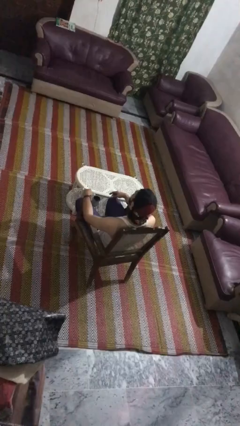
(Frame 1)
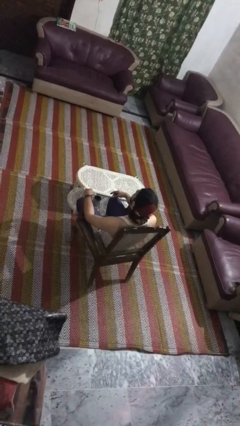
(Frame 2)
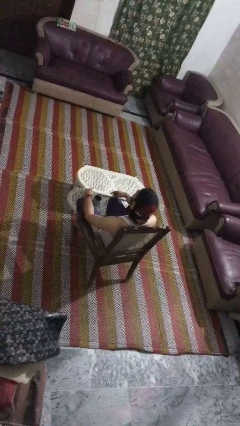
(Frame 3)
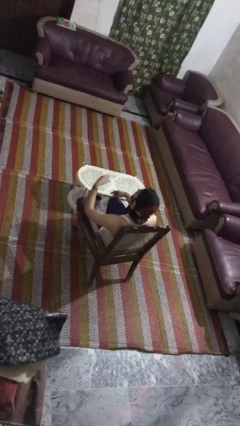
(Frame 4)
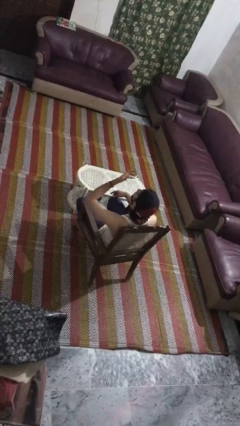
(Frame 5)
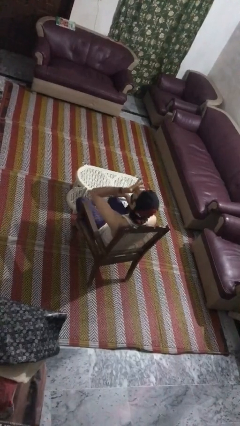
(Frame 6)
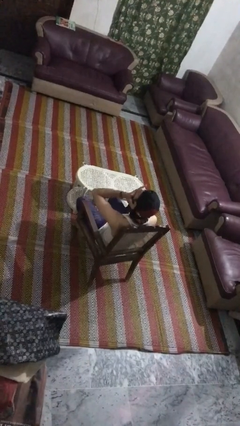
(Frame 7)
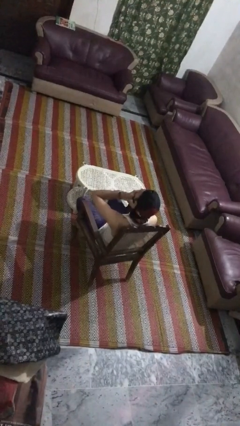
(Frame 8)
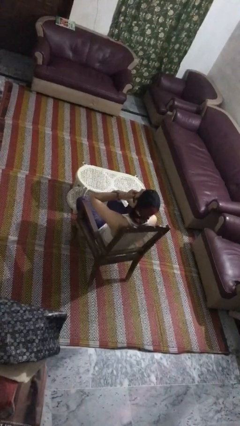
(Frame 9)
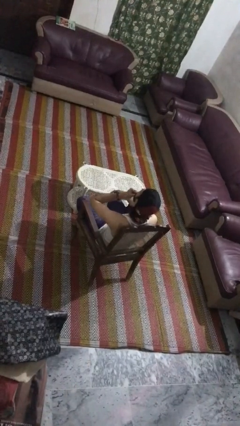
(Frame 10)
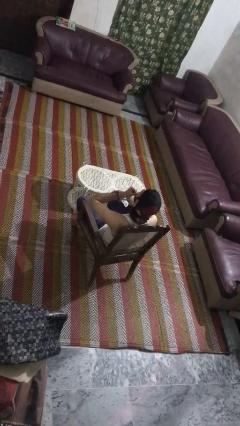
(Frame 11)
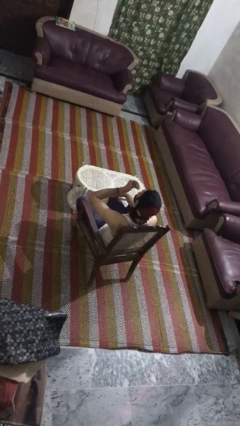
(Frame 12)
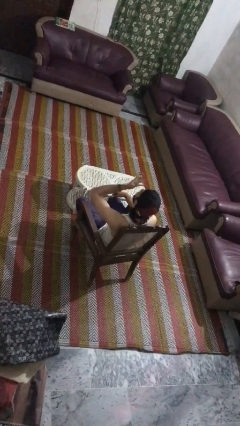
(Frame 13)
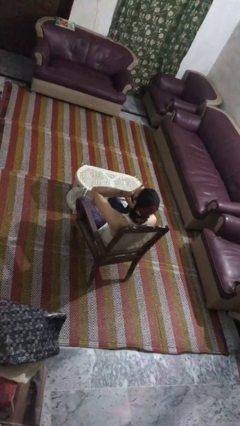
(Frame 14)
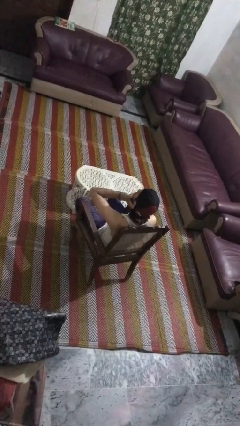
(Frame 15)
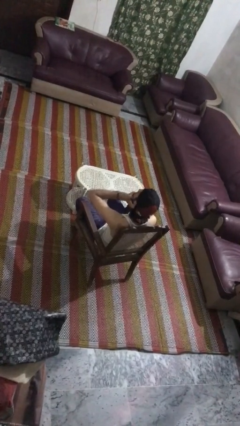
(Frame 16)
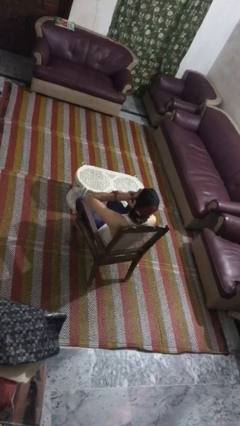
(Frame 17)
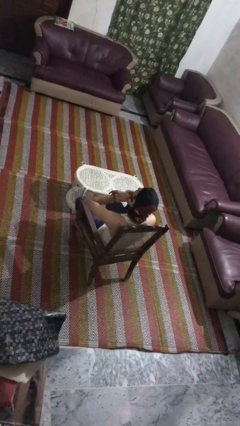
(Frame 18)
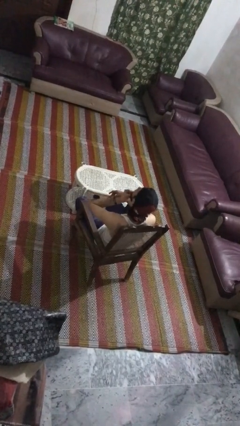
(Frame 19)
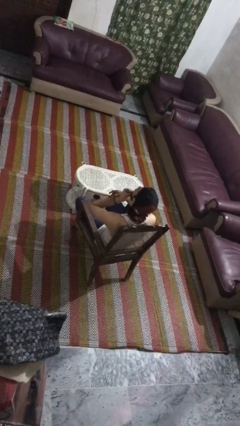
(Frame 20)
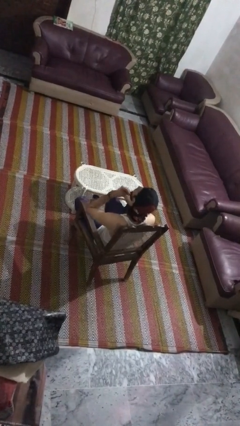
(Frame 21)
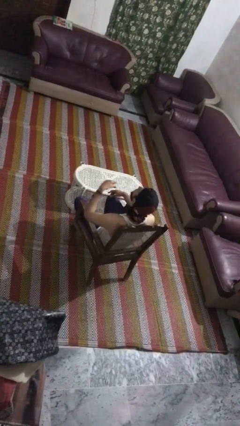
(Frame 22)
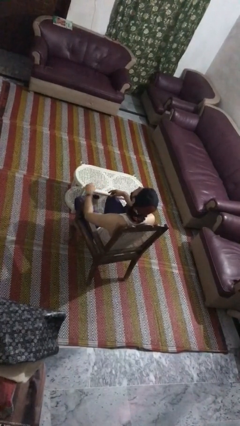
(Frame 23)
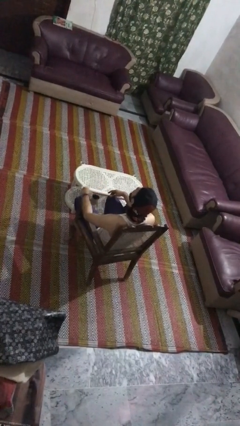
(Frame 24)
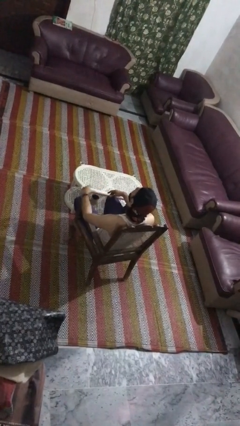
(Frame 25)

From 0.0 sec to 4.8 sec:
person strokes chin

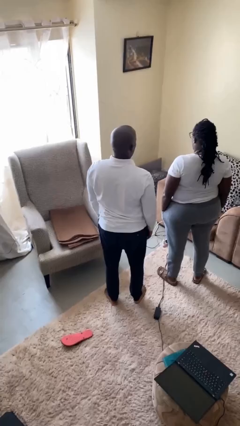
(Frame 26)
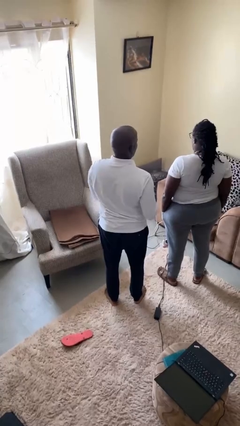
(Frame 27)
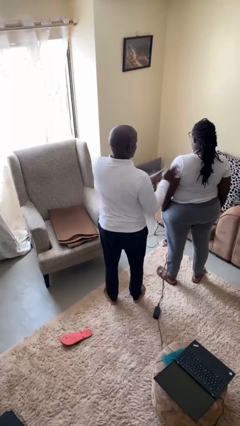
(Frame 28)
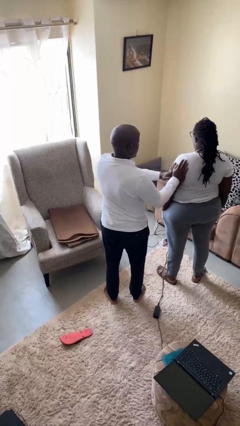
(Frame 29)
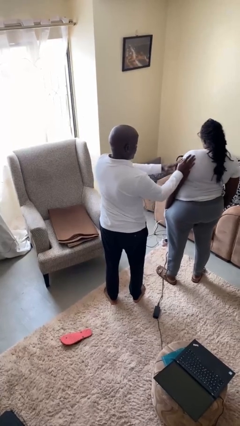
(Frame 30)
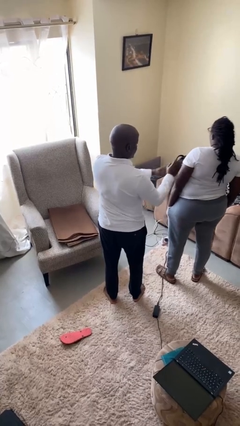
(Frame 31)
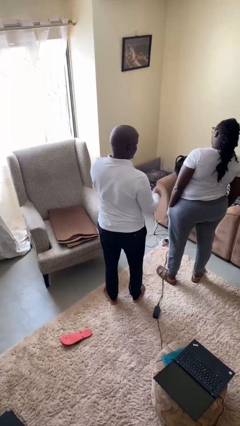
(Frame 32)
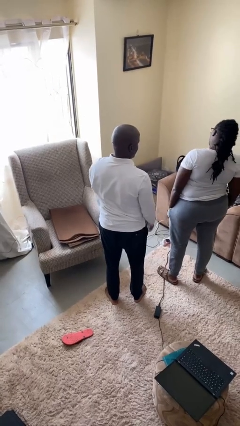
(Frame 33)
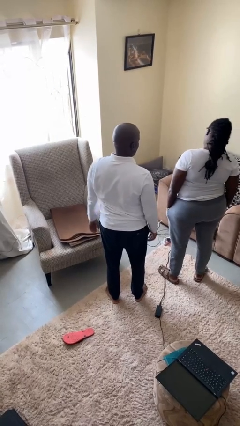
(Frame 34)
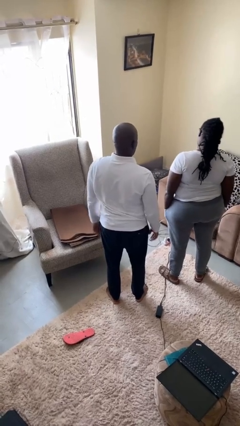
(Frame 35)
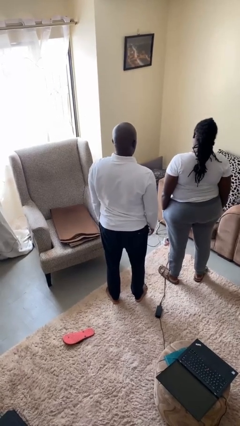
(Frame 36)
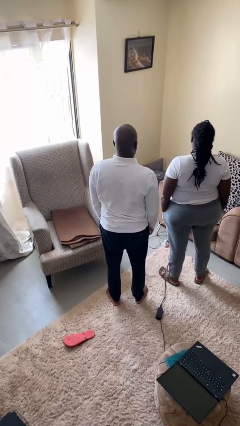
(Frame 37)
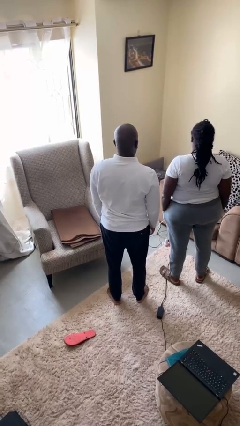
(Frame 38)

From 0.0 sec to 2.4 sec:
person shoves person

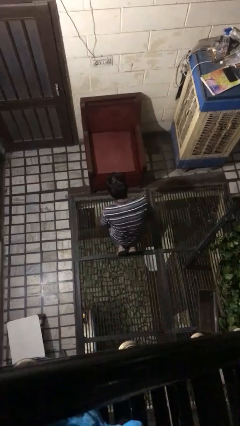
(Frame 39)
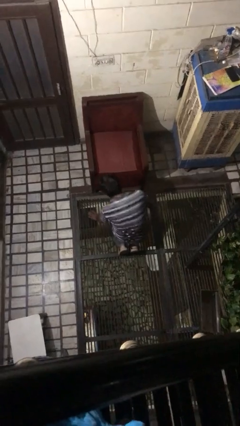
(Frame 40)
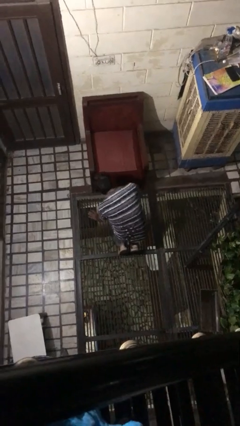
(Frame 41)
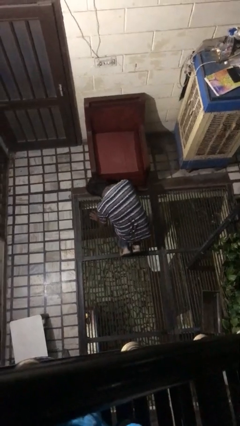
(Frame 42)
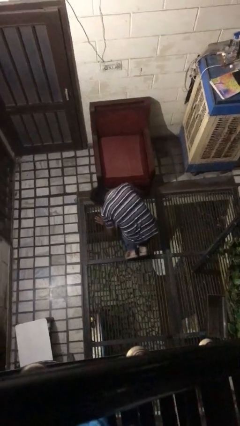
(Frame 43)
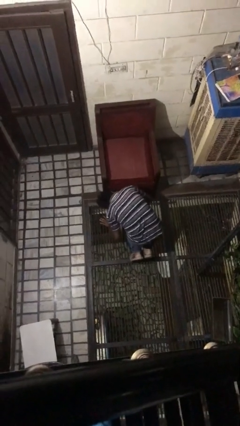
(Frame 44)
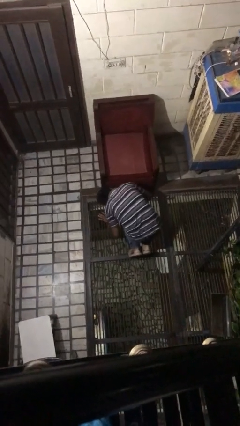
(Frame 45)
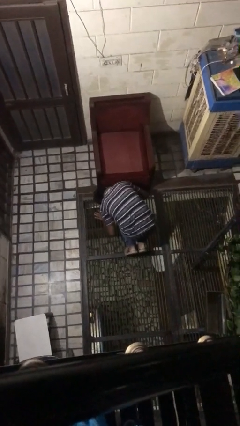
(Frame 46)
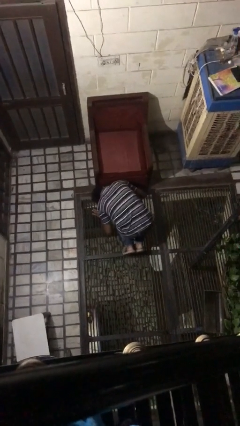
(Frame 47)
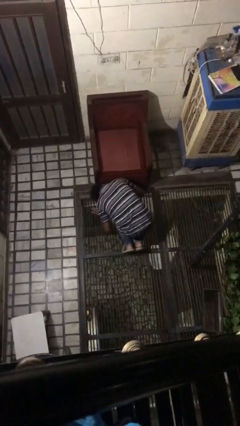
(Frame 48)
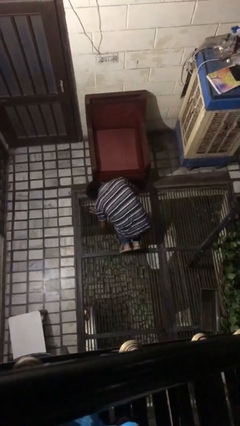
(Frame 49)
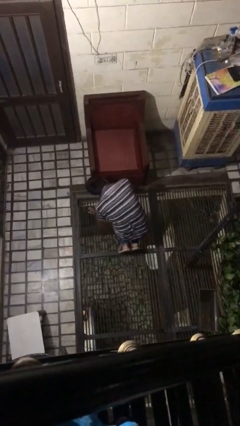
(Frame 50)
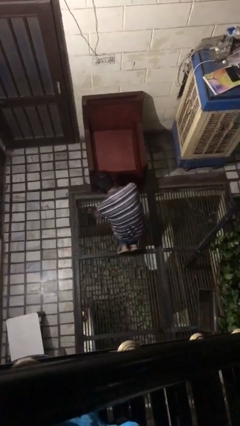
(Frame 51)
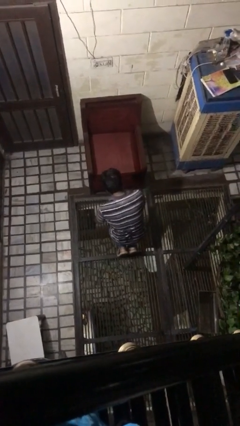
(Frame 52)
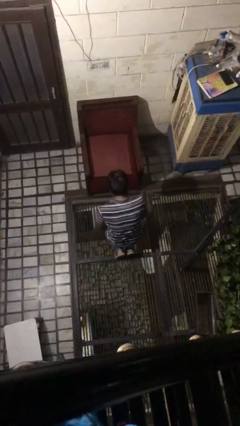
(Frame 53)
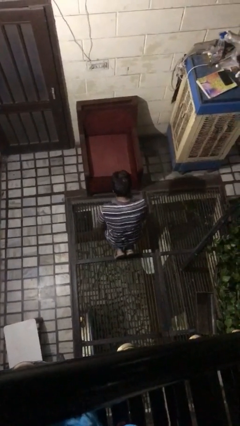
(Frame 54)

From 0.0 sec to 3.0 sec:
person searches under couch

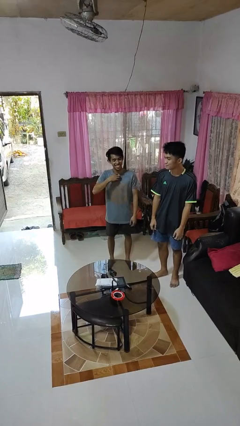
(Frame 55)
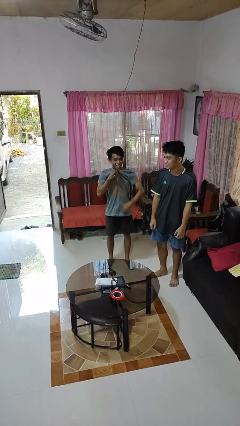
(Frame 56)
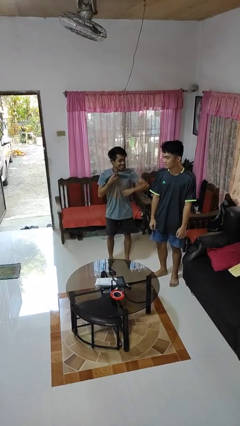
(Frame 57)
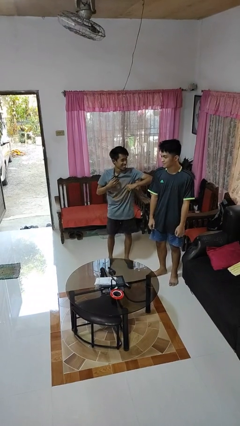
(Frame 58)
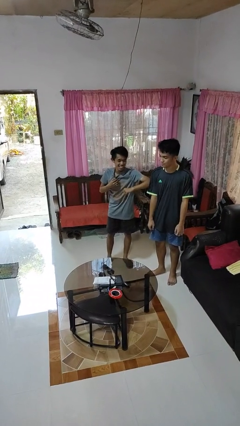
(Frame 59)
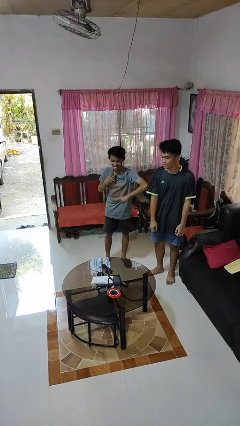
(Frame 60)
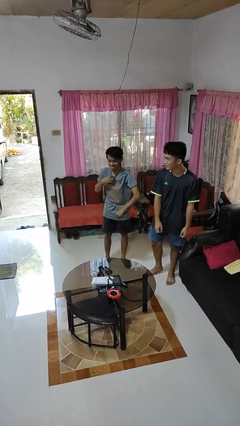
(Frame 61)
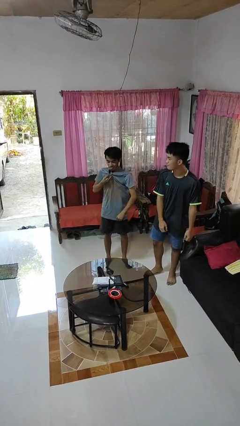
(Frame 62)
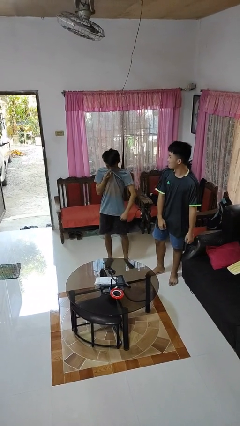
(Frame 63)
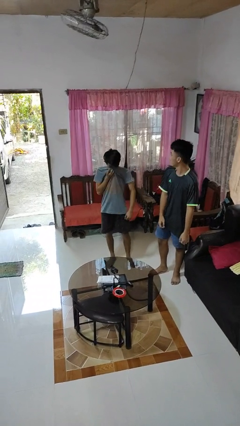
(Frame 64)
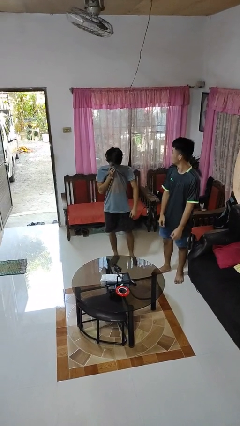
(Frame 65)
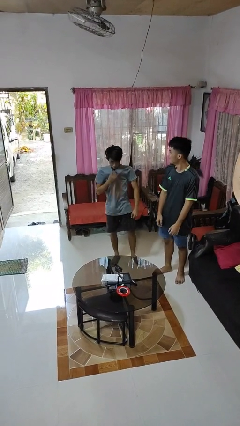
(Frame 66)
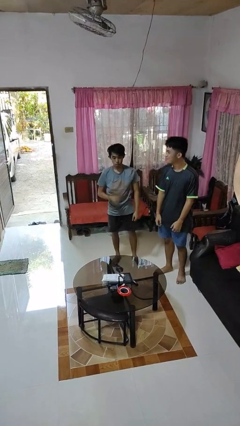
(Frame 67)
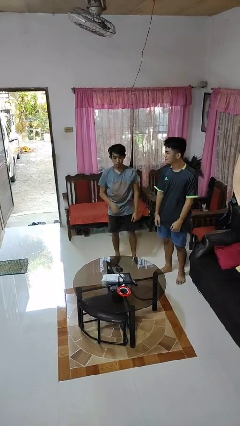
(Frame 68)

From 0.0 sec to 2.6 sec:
person nudges person with elbow

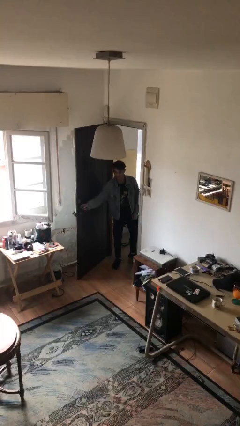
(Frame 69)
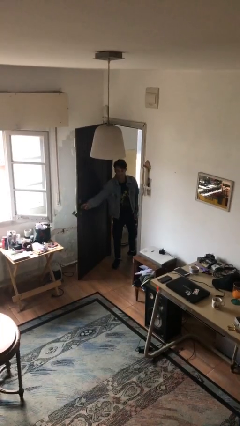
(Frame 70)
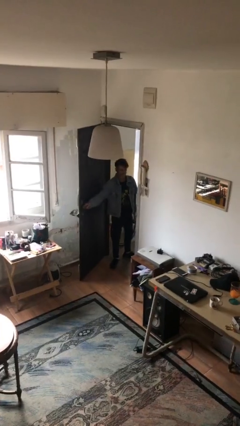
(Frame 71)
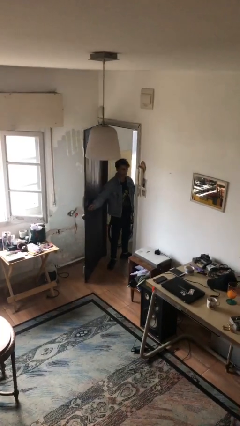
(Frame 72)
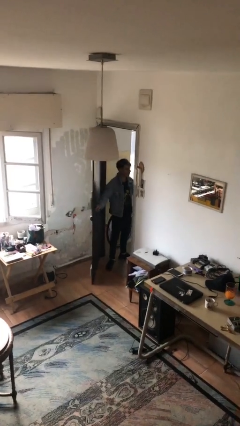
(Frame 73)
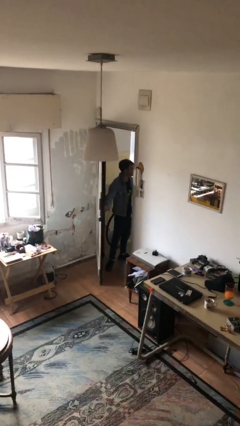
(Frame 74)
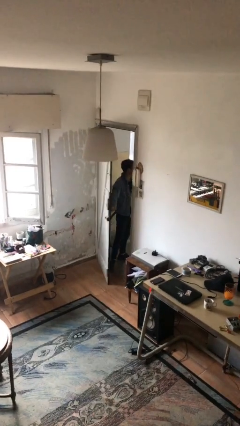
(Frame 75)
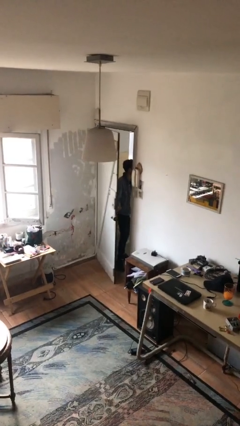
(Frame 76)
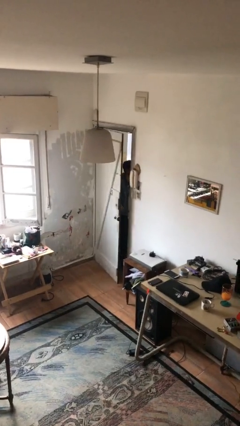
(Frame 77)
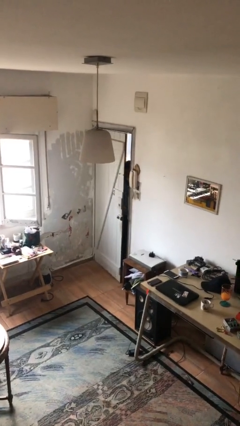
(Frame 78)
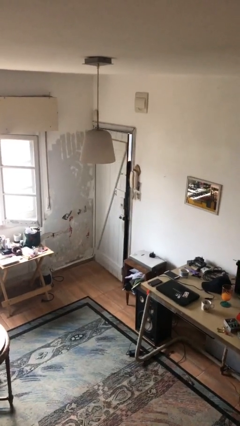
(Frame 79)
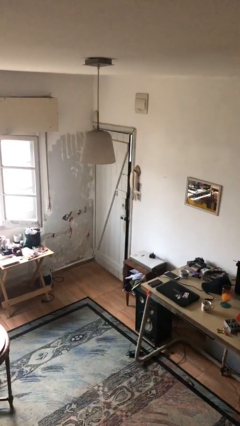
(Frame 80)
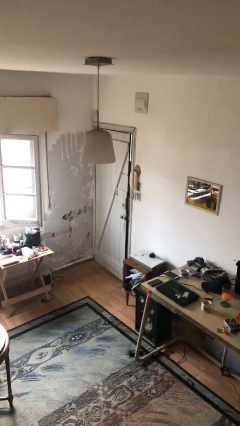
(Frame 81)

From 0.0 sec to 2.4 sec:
person closes facility door

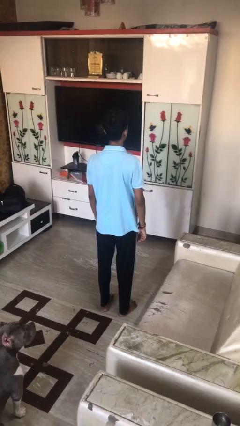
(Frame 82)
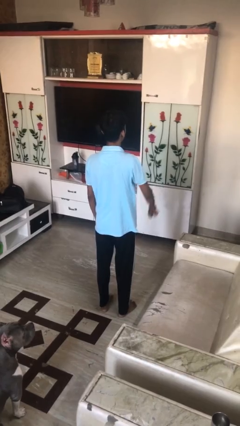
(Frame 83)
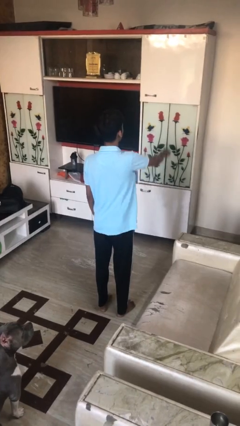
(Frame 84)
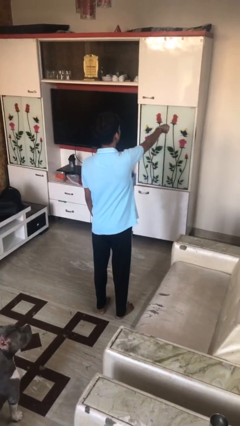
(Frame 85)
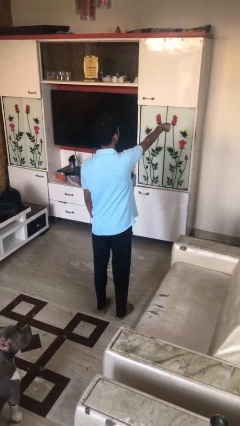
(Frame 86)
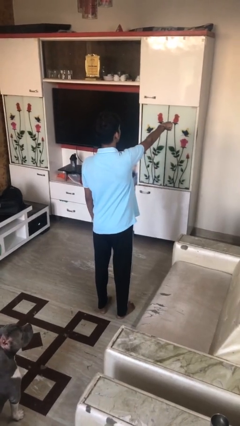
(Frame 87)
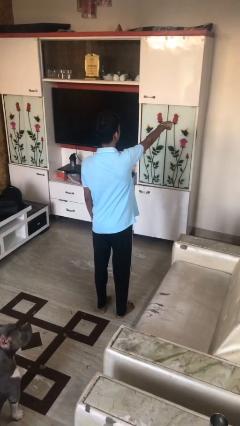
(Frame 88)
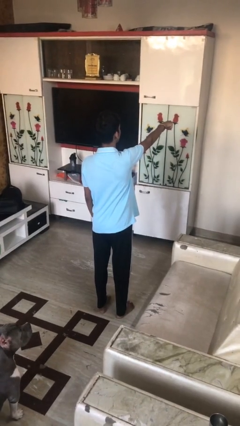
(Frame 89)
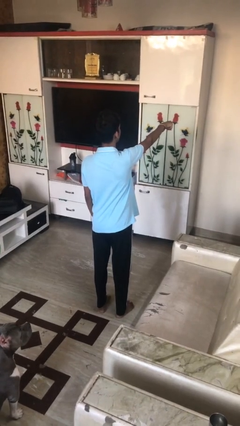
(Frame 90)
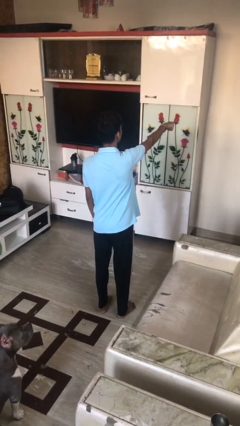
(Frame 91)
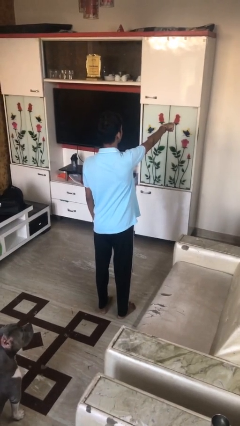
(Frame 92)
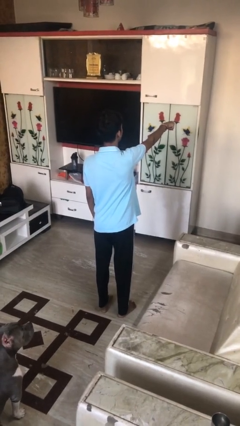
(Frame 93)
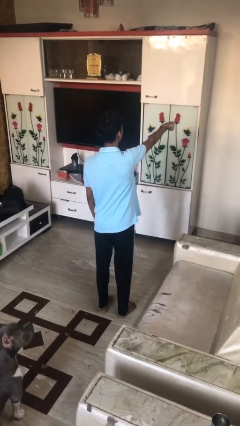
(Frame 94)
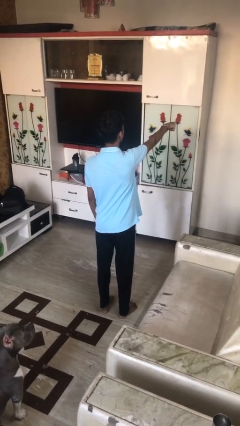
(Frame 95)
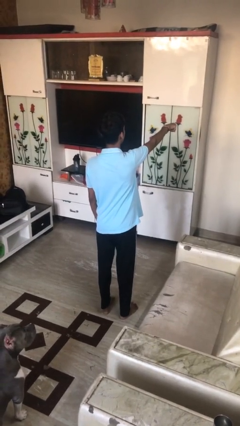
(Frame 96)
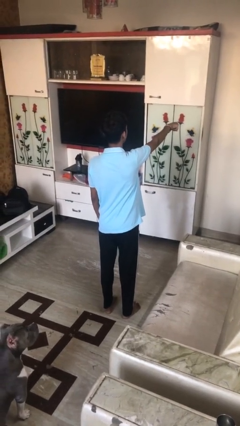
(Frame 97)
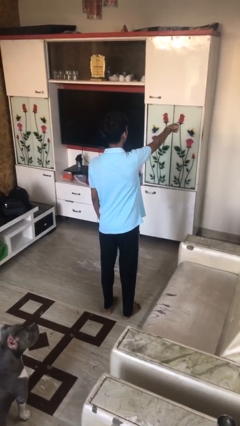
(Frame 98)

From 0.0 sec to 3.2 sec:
person points at person
